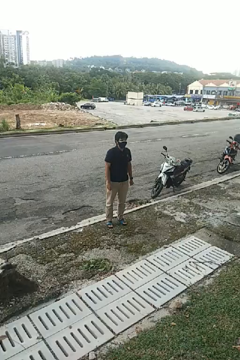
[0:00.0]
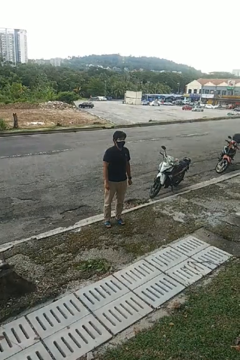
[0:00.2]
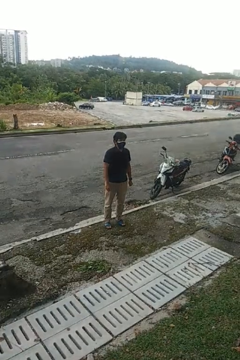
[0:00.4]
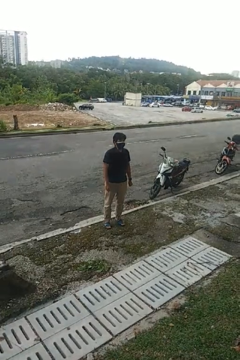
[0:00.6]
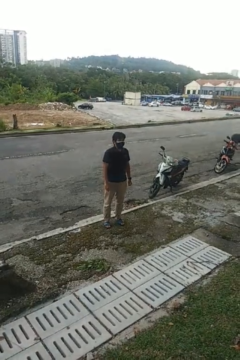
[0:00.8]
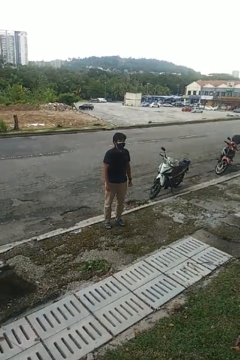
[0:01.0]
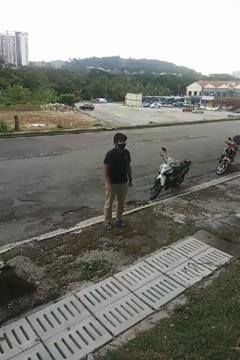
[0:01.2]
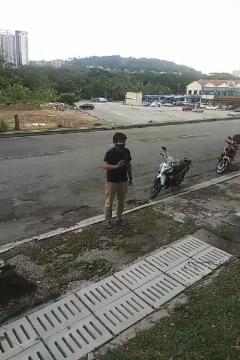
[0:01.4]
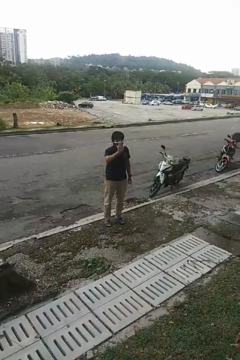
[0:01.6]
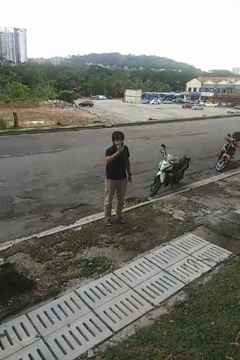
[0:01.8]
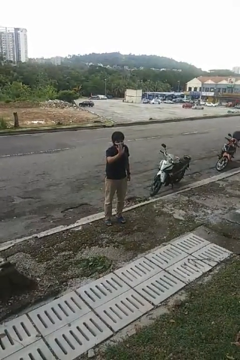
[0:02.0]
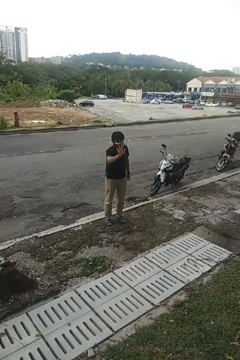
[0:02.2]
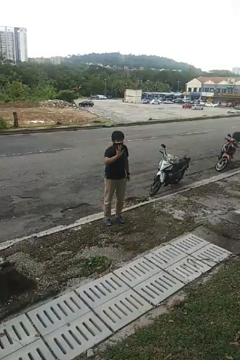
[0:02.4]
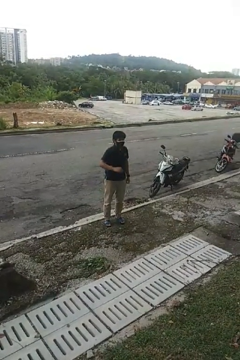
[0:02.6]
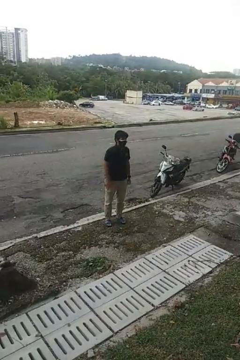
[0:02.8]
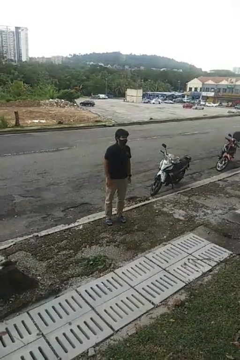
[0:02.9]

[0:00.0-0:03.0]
person gestures stop

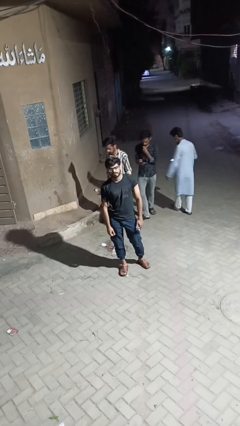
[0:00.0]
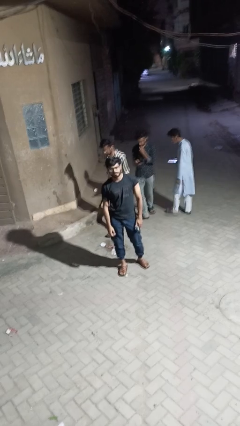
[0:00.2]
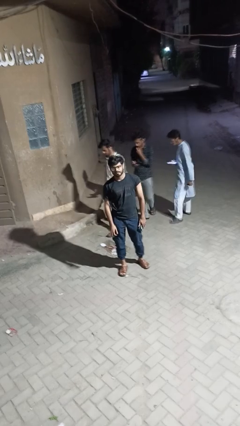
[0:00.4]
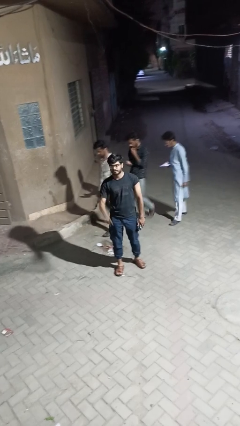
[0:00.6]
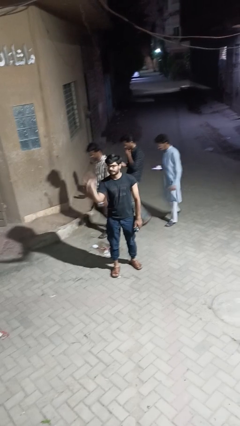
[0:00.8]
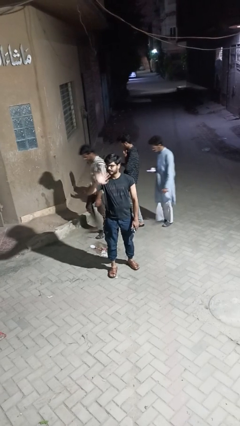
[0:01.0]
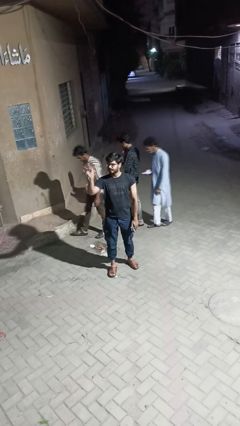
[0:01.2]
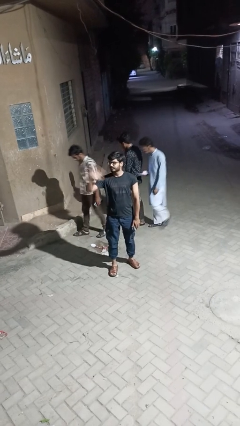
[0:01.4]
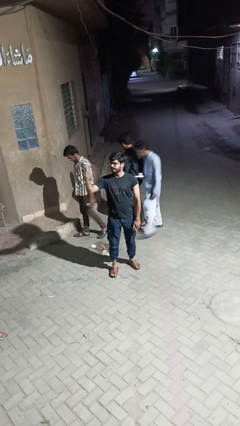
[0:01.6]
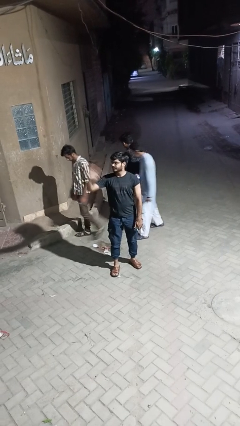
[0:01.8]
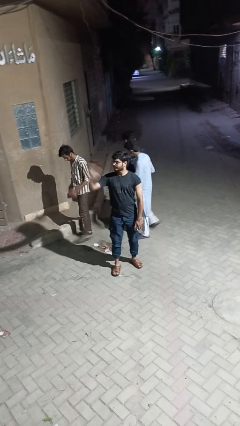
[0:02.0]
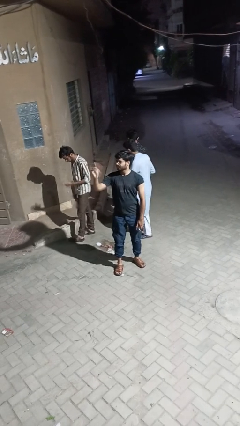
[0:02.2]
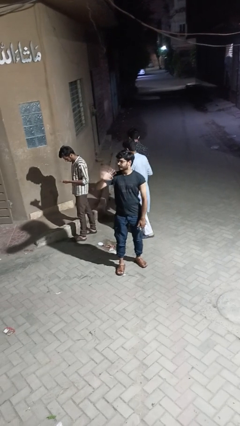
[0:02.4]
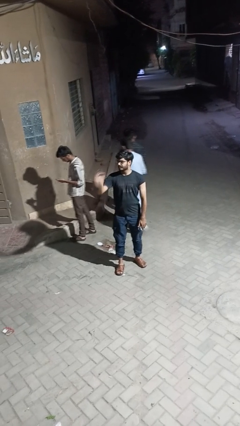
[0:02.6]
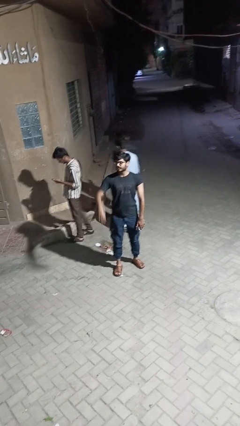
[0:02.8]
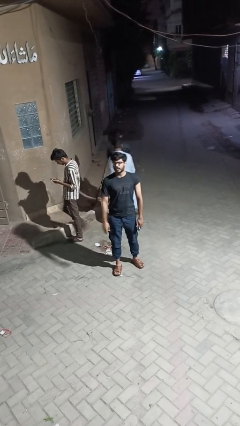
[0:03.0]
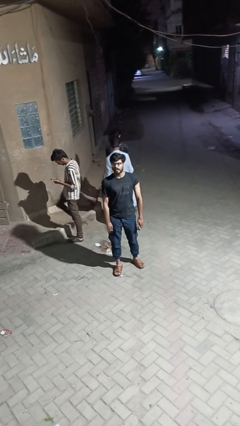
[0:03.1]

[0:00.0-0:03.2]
person waves at person

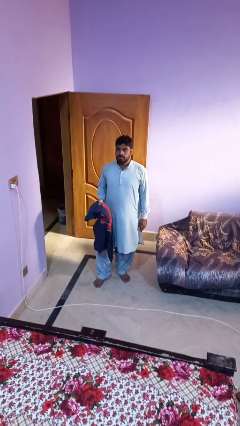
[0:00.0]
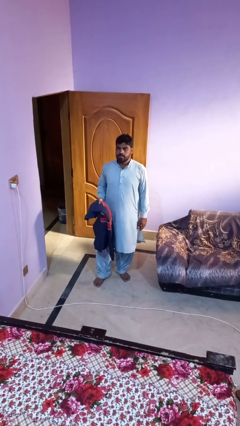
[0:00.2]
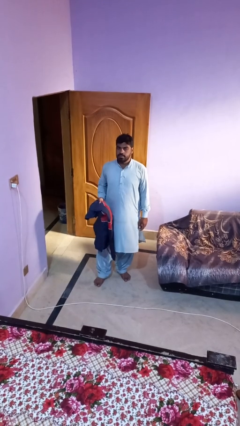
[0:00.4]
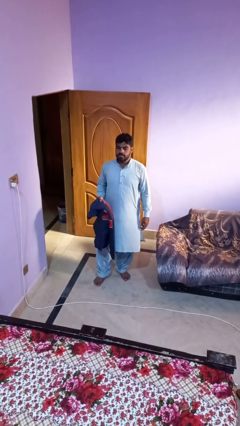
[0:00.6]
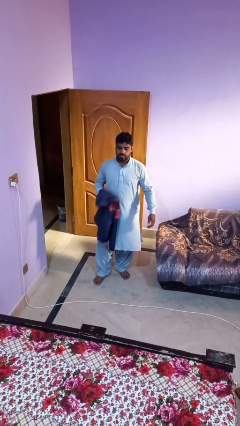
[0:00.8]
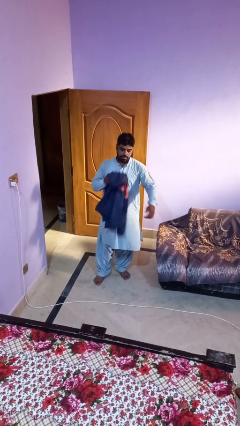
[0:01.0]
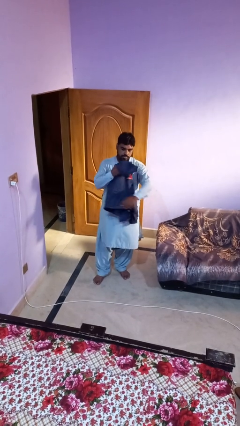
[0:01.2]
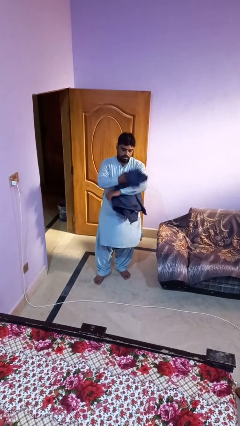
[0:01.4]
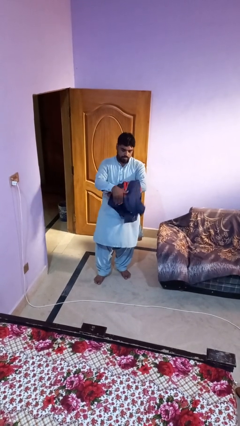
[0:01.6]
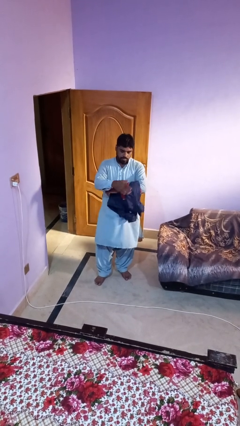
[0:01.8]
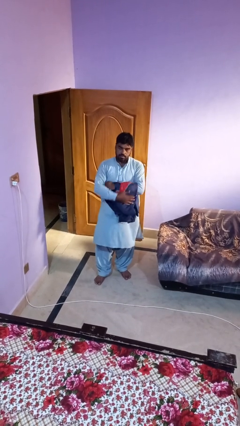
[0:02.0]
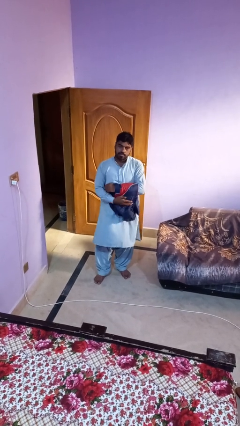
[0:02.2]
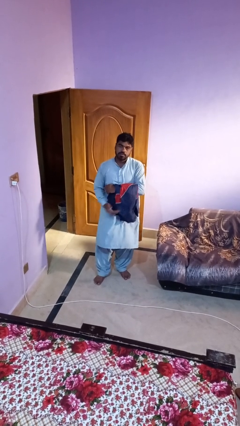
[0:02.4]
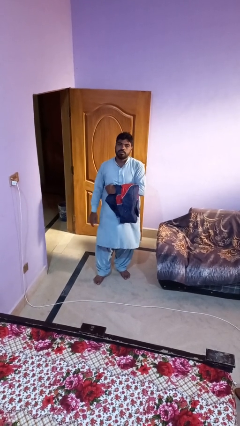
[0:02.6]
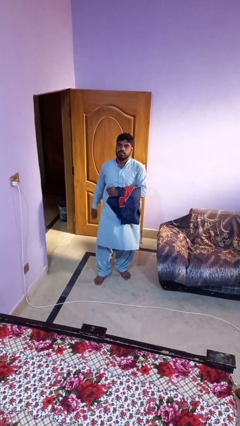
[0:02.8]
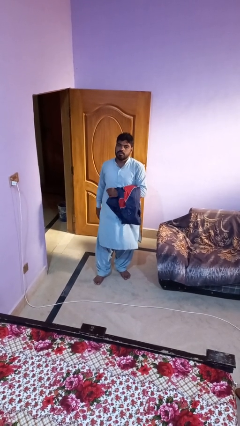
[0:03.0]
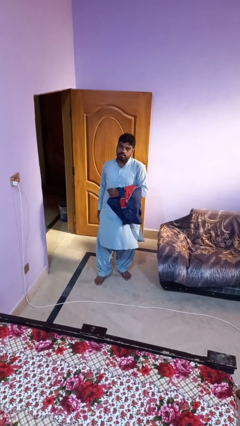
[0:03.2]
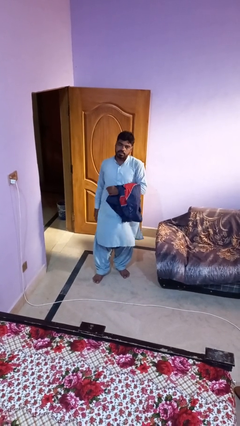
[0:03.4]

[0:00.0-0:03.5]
person ties jacket around waist

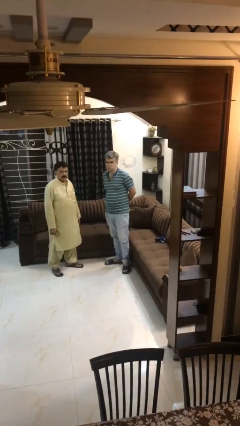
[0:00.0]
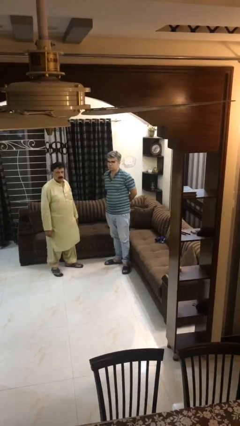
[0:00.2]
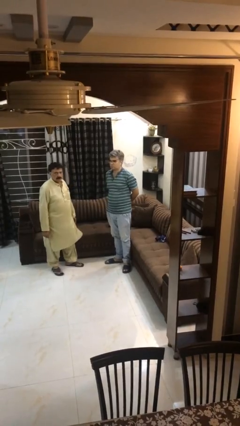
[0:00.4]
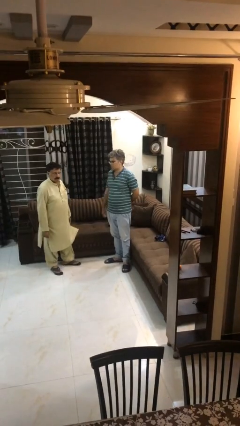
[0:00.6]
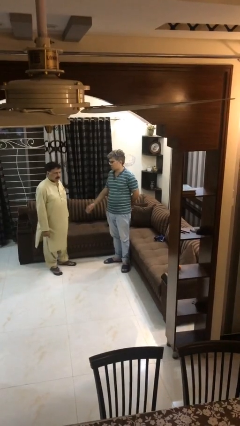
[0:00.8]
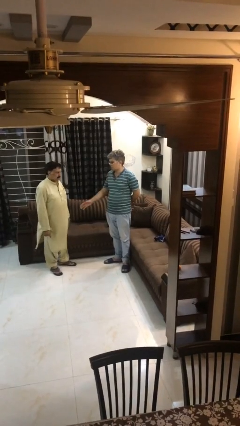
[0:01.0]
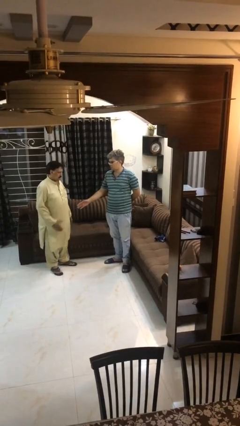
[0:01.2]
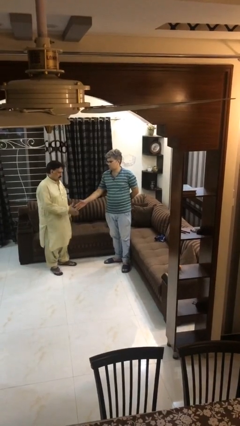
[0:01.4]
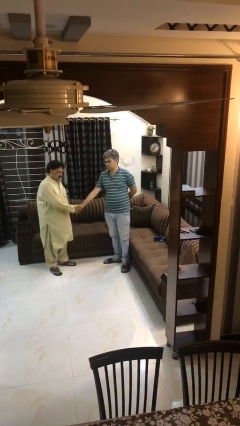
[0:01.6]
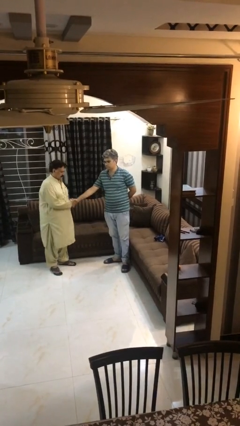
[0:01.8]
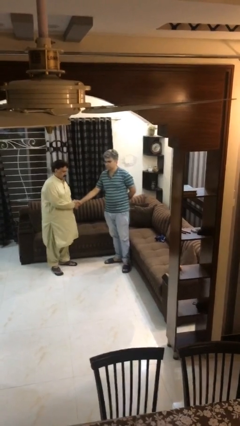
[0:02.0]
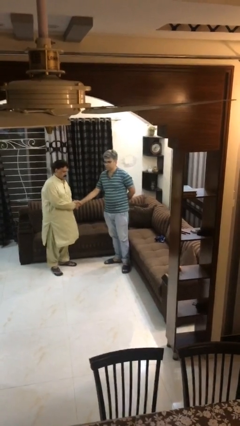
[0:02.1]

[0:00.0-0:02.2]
person shakes hand

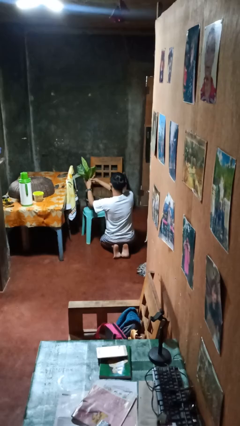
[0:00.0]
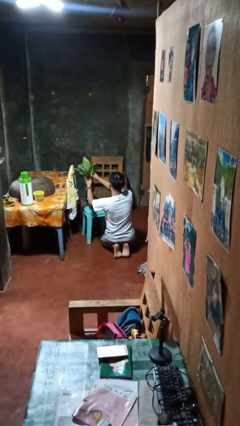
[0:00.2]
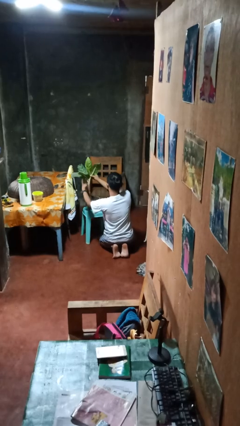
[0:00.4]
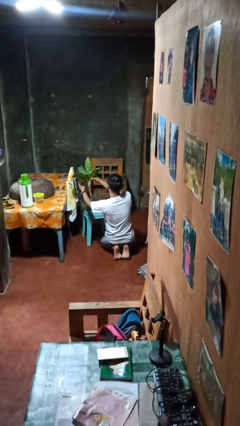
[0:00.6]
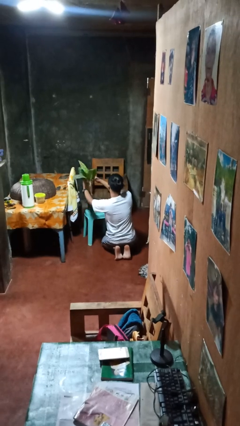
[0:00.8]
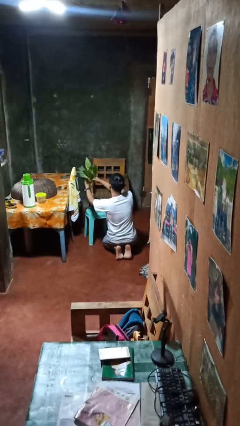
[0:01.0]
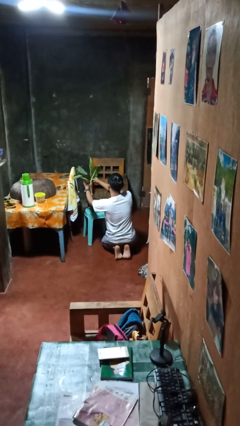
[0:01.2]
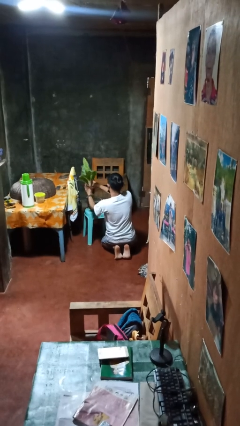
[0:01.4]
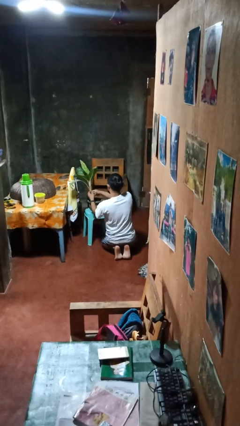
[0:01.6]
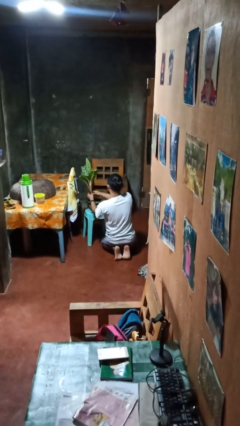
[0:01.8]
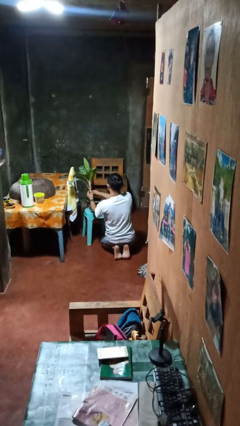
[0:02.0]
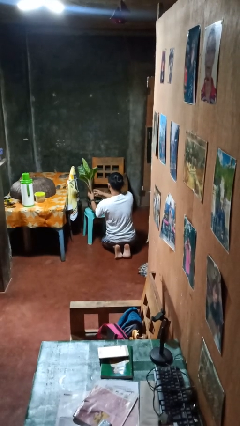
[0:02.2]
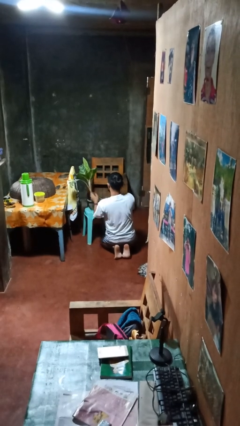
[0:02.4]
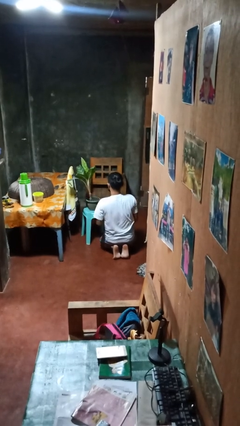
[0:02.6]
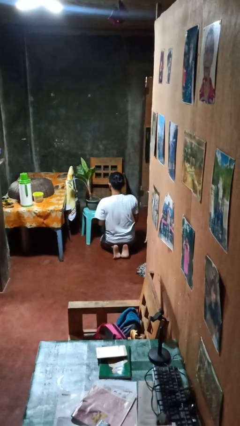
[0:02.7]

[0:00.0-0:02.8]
person arranges flowers in vase

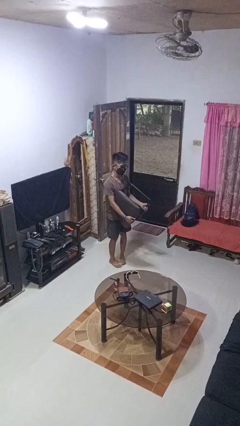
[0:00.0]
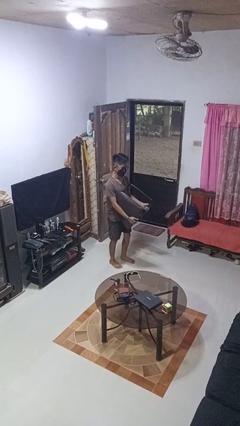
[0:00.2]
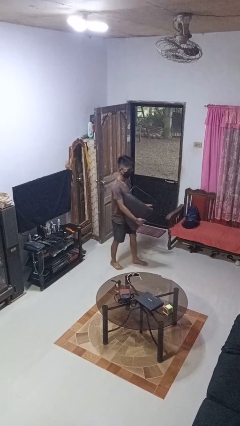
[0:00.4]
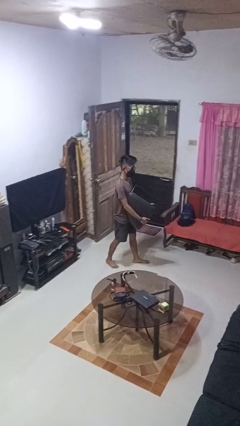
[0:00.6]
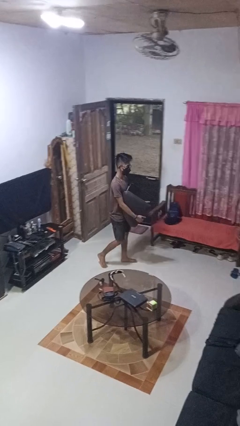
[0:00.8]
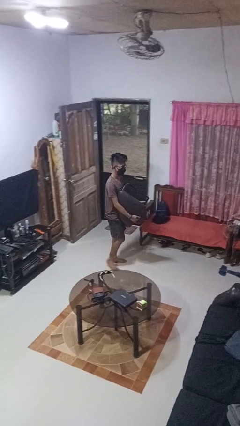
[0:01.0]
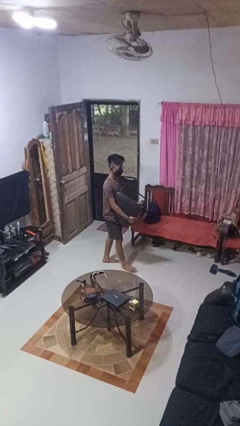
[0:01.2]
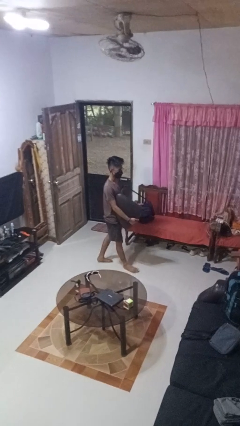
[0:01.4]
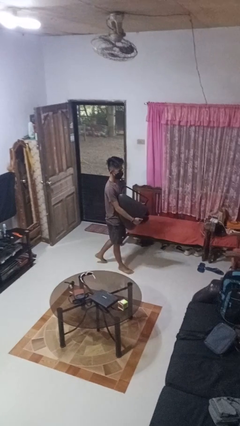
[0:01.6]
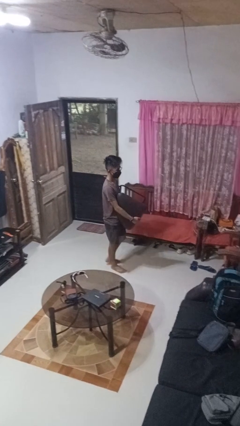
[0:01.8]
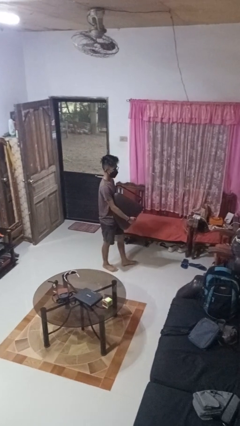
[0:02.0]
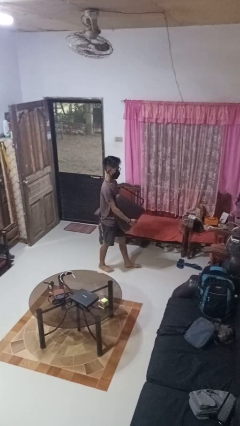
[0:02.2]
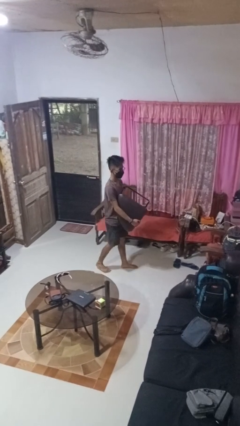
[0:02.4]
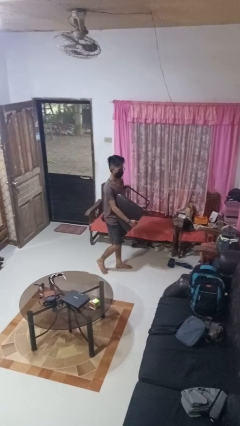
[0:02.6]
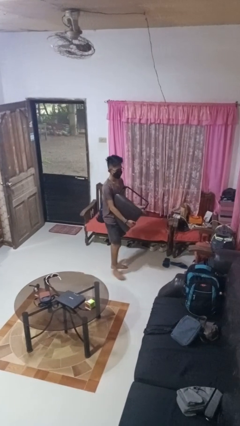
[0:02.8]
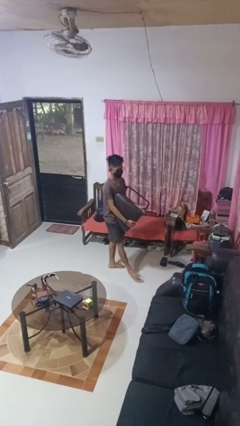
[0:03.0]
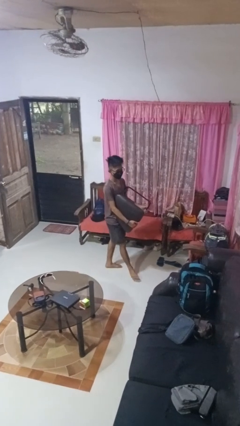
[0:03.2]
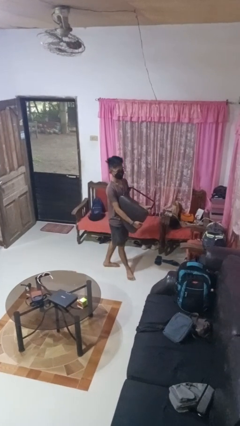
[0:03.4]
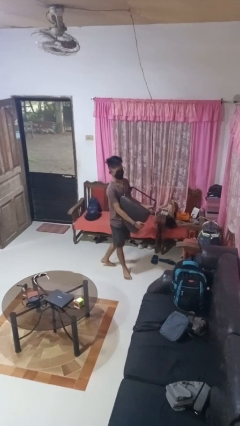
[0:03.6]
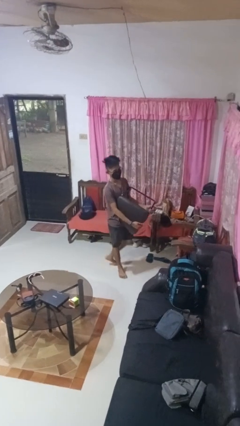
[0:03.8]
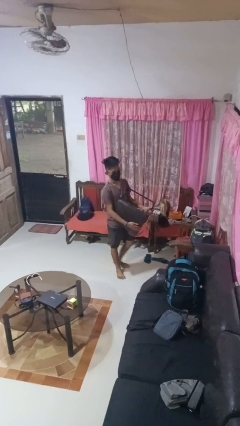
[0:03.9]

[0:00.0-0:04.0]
person carries furniture
